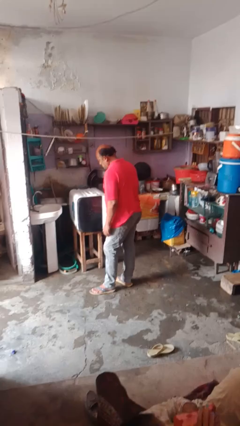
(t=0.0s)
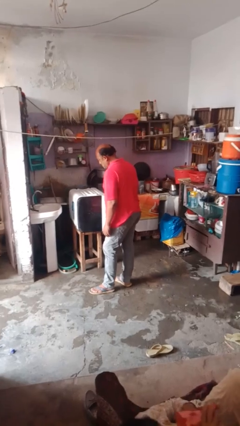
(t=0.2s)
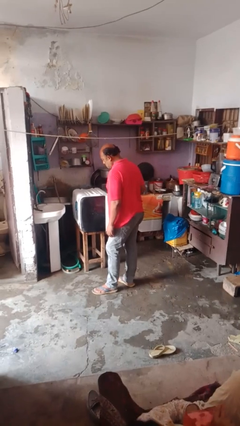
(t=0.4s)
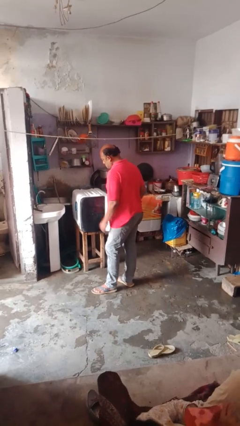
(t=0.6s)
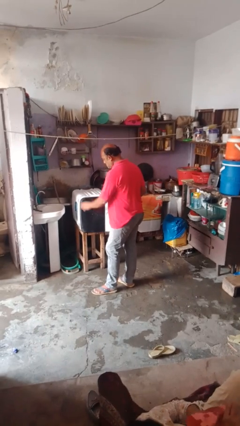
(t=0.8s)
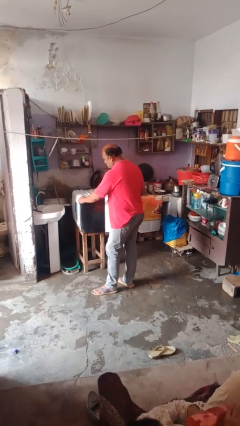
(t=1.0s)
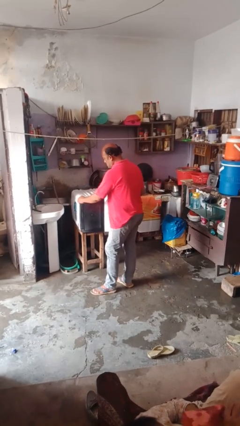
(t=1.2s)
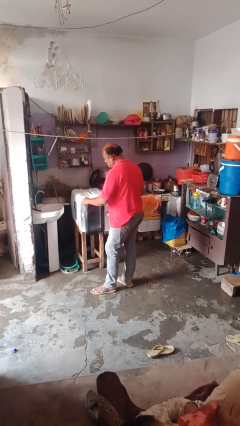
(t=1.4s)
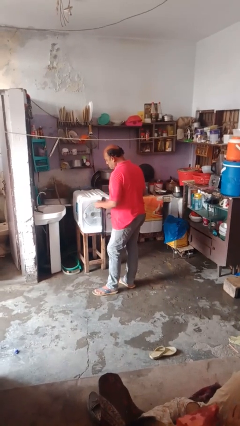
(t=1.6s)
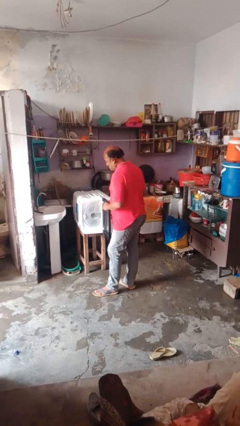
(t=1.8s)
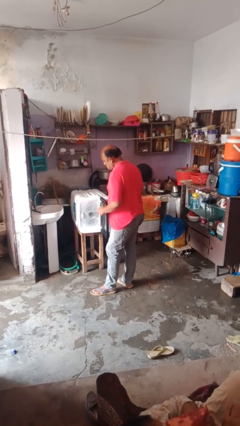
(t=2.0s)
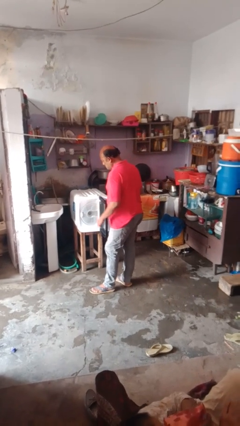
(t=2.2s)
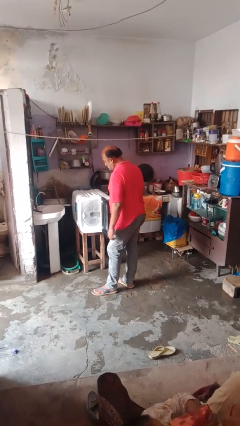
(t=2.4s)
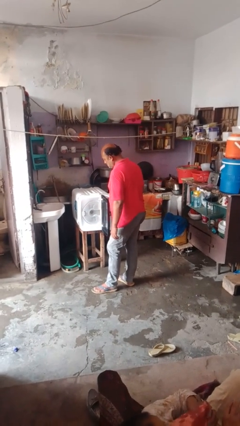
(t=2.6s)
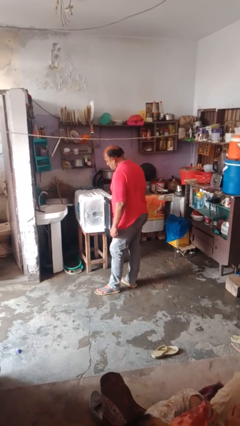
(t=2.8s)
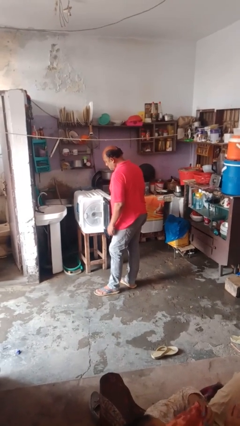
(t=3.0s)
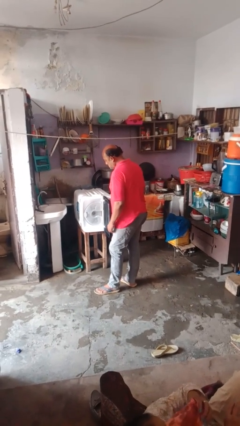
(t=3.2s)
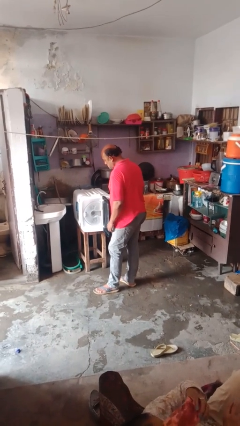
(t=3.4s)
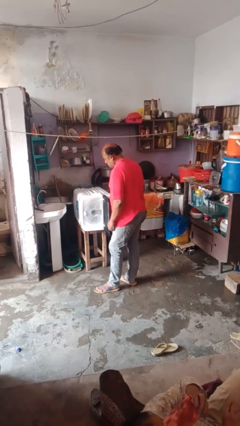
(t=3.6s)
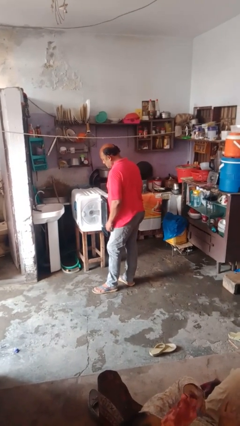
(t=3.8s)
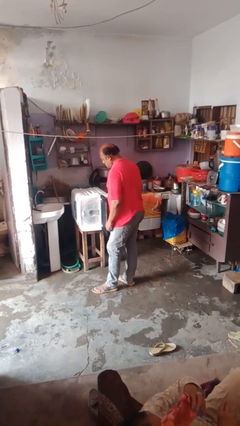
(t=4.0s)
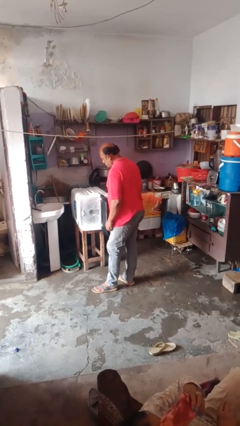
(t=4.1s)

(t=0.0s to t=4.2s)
person opens dishwasher

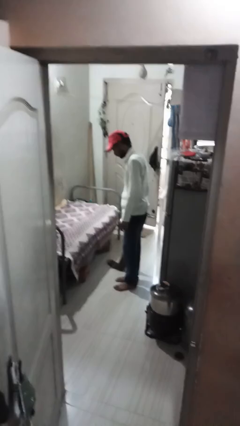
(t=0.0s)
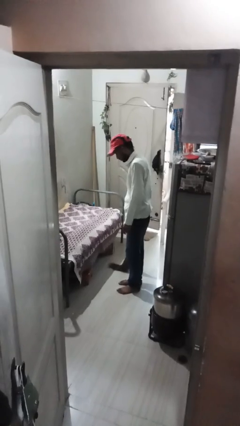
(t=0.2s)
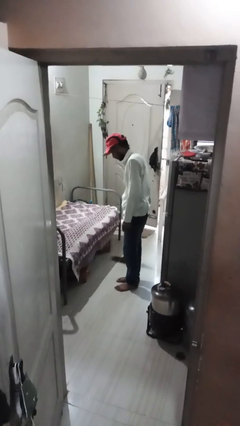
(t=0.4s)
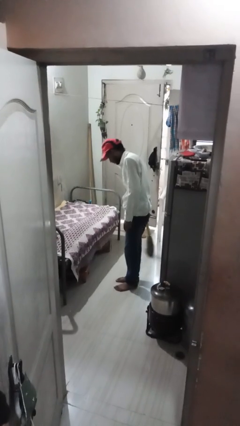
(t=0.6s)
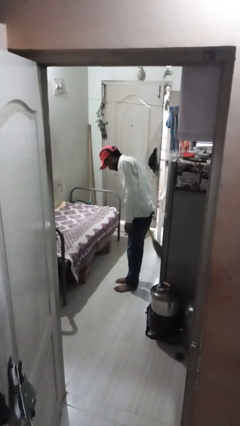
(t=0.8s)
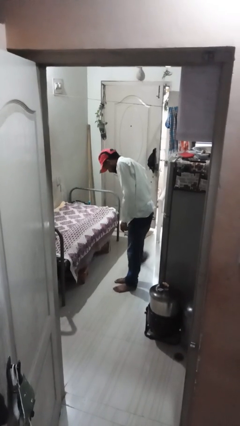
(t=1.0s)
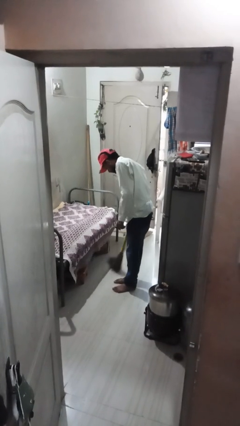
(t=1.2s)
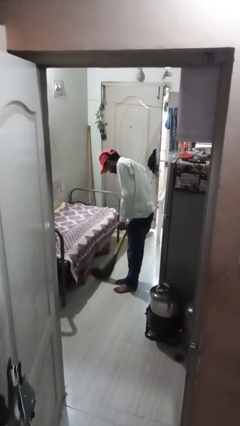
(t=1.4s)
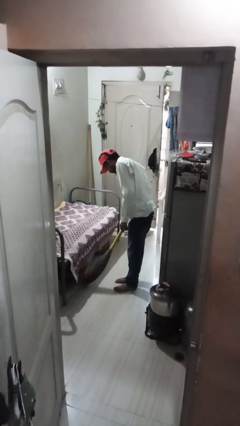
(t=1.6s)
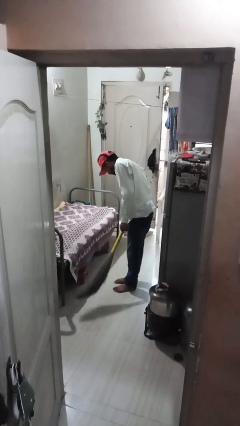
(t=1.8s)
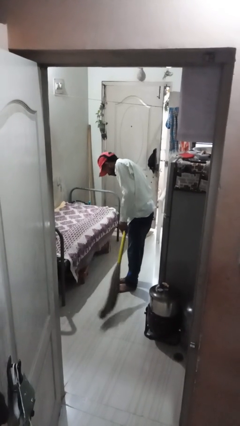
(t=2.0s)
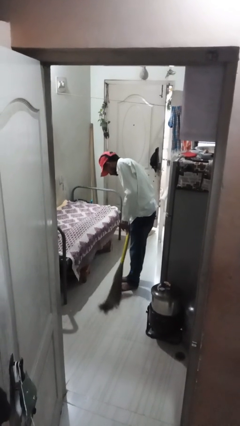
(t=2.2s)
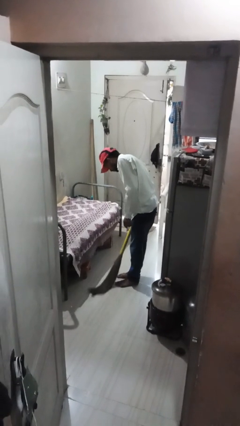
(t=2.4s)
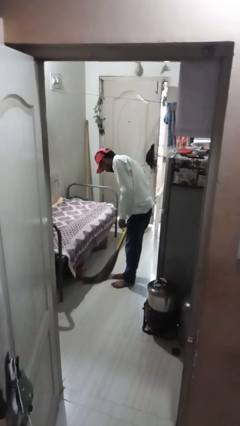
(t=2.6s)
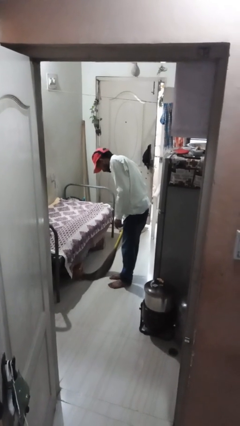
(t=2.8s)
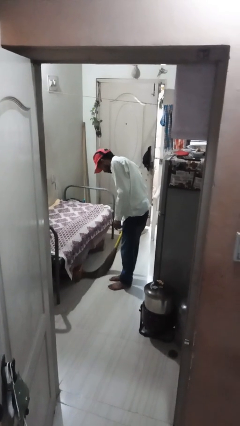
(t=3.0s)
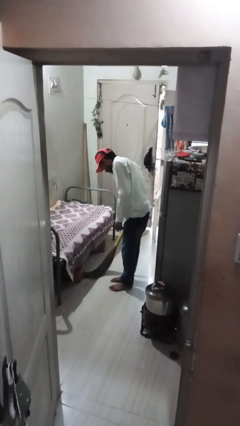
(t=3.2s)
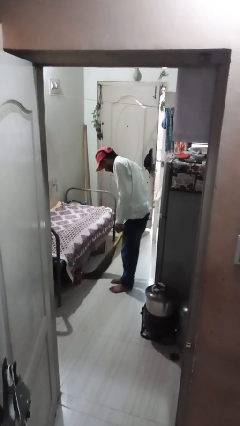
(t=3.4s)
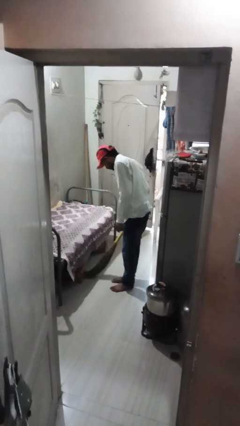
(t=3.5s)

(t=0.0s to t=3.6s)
person sweeps floor

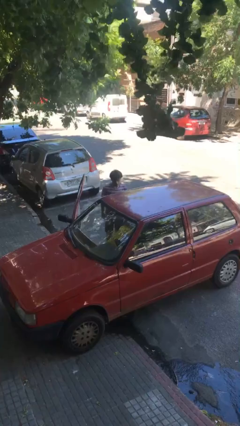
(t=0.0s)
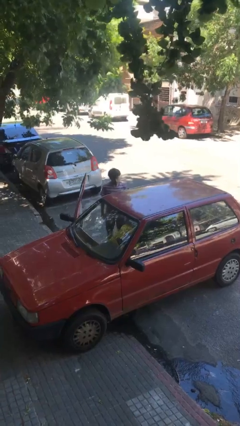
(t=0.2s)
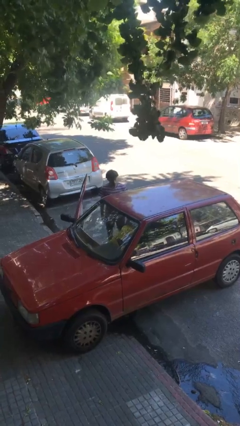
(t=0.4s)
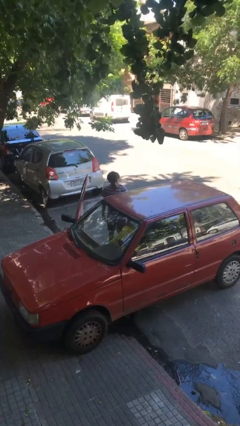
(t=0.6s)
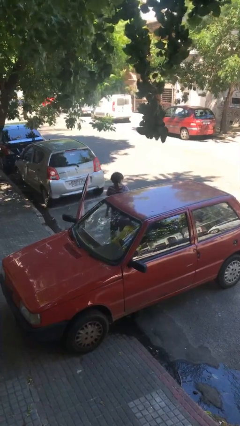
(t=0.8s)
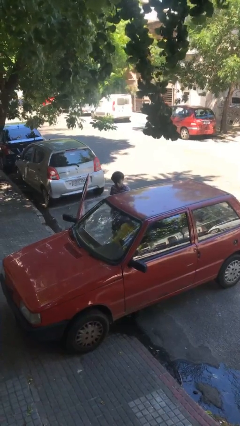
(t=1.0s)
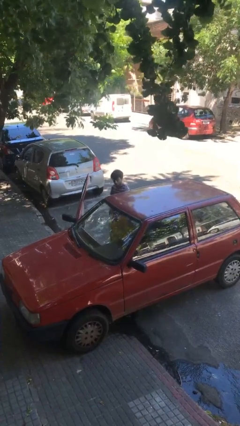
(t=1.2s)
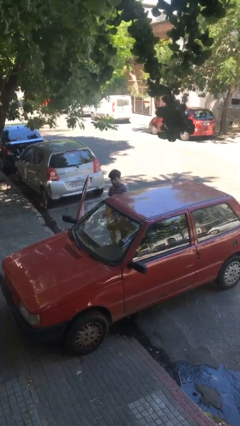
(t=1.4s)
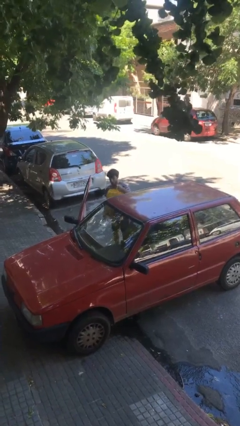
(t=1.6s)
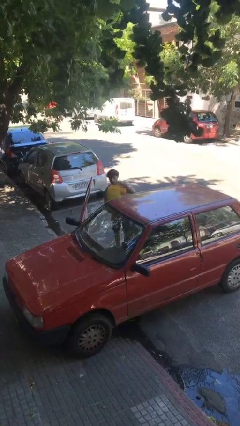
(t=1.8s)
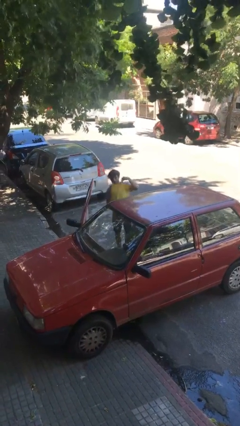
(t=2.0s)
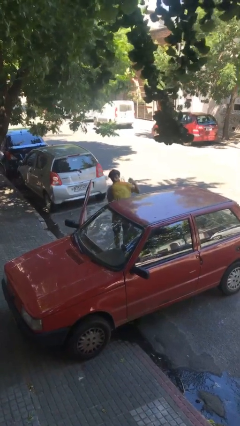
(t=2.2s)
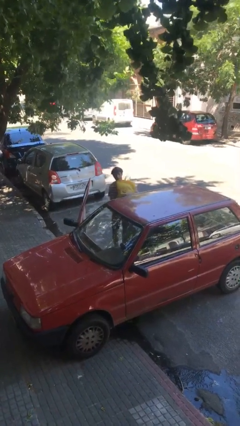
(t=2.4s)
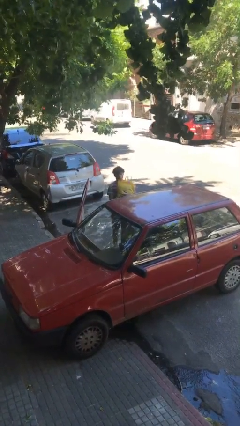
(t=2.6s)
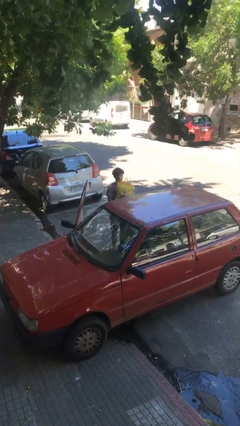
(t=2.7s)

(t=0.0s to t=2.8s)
person unloads car

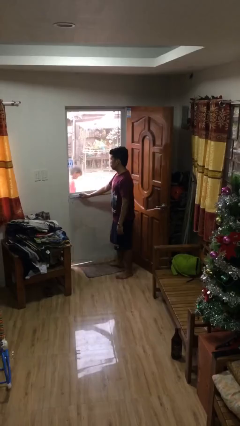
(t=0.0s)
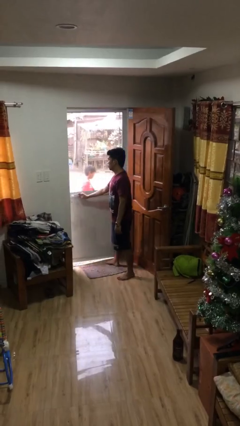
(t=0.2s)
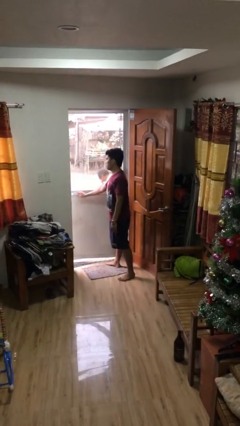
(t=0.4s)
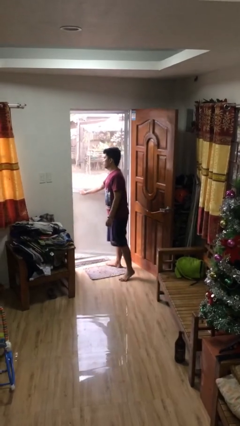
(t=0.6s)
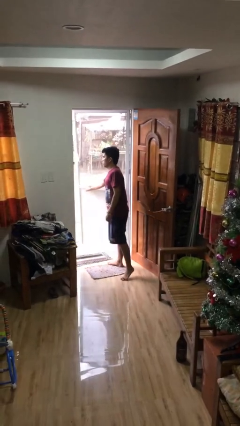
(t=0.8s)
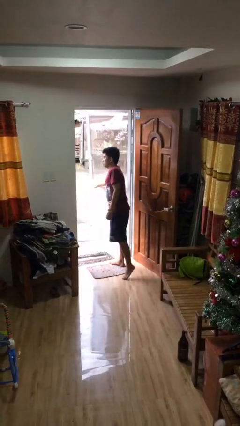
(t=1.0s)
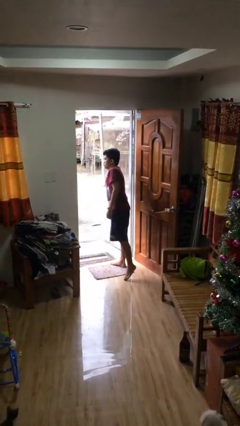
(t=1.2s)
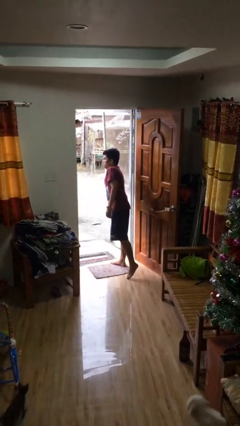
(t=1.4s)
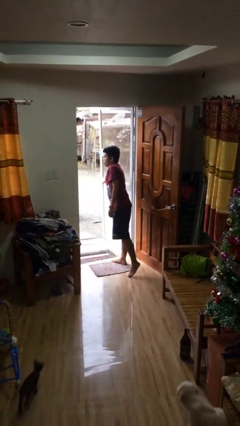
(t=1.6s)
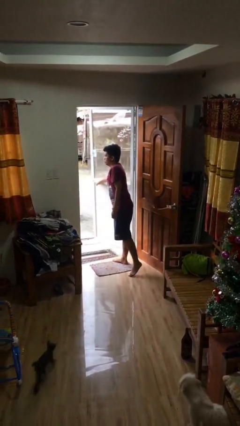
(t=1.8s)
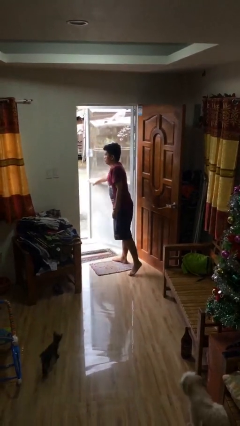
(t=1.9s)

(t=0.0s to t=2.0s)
person opens facility door

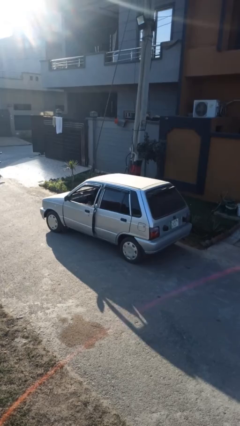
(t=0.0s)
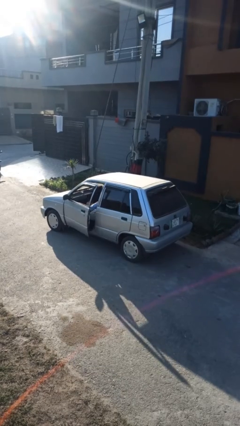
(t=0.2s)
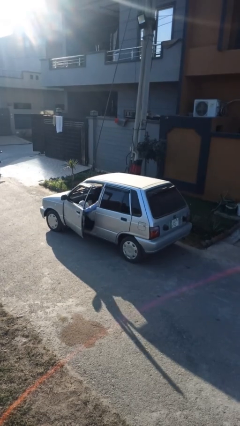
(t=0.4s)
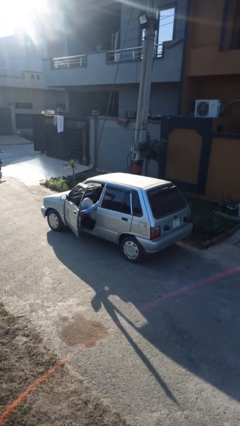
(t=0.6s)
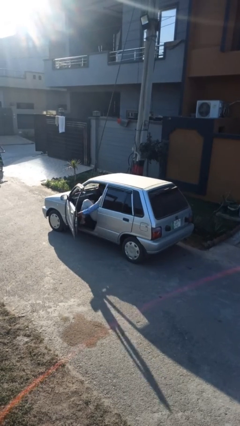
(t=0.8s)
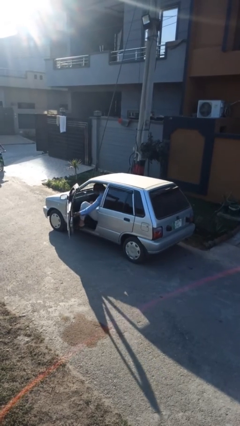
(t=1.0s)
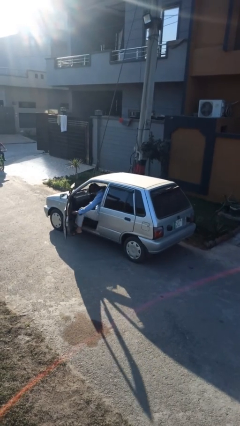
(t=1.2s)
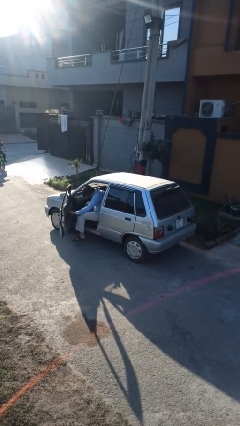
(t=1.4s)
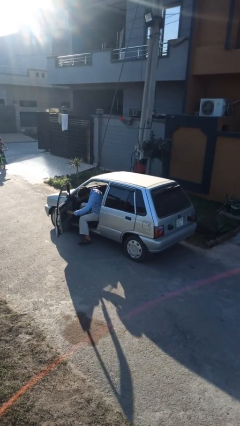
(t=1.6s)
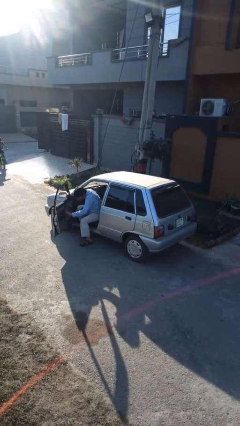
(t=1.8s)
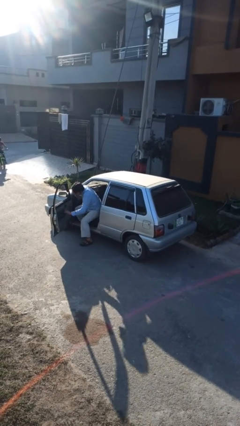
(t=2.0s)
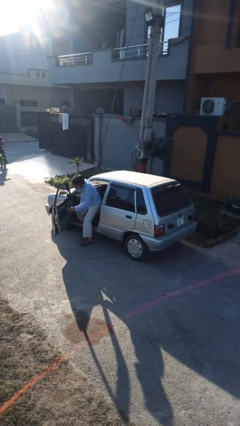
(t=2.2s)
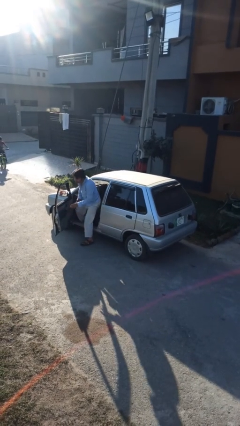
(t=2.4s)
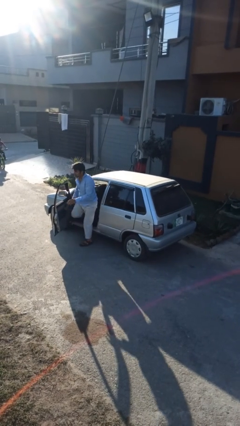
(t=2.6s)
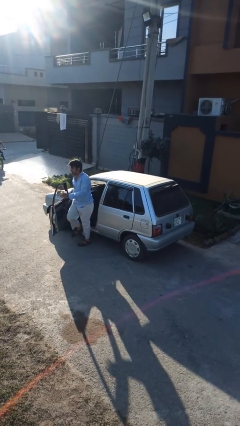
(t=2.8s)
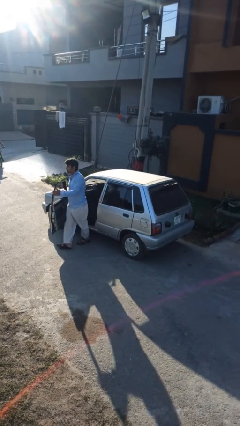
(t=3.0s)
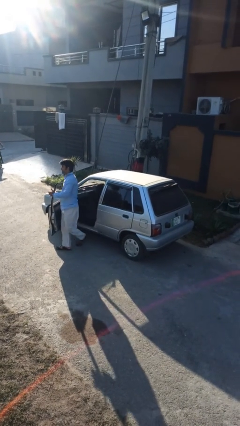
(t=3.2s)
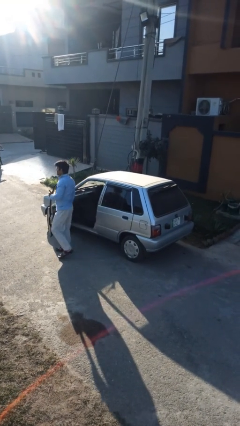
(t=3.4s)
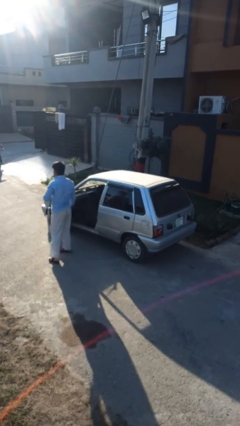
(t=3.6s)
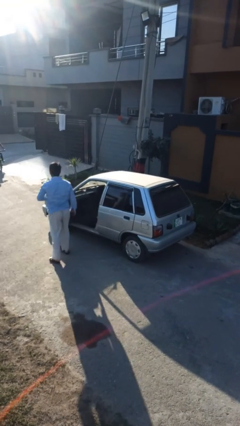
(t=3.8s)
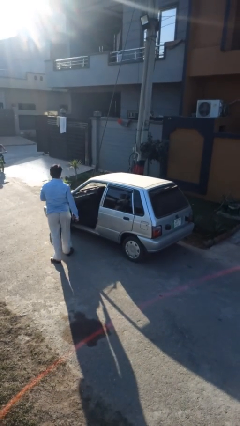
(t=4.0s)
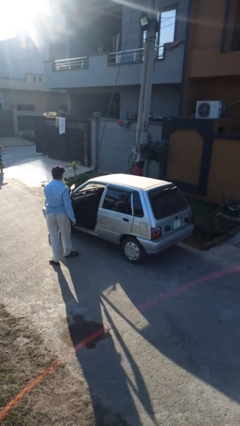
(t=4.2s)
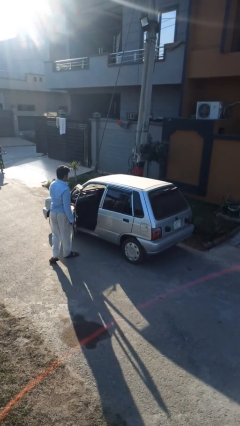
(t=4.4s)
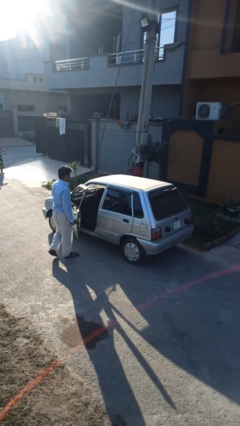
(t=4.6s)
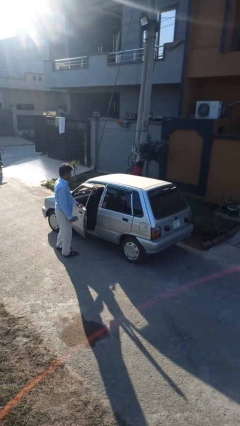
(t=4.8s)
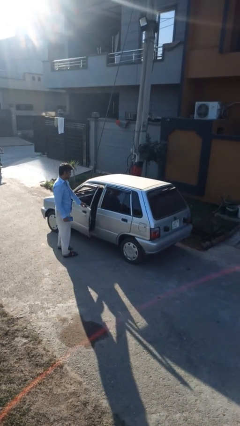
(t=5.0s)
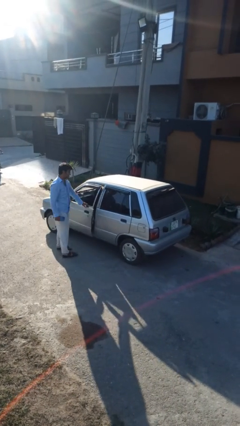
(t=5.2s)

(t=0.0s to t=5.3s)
car drops off person

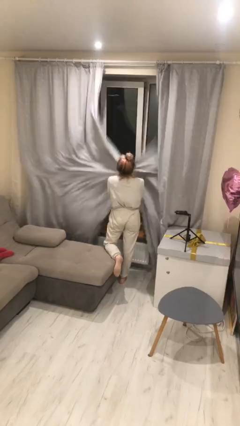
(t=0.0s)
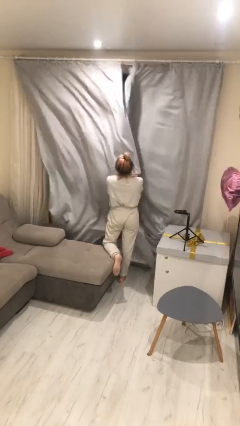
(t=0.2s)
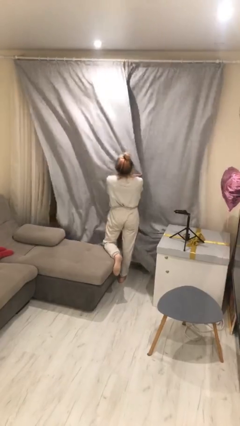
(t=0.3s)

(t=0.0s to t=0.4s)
person closes curtains
